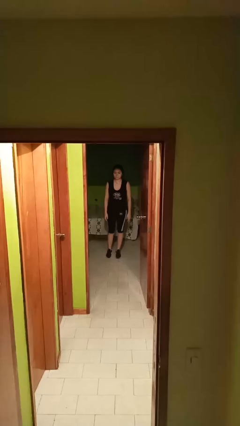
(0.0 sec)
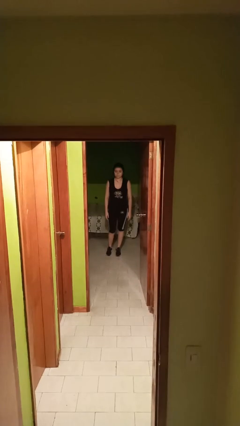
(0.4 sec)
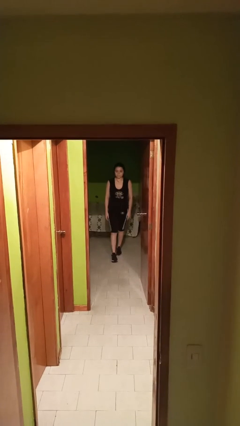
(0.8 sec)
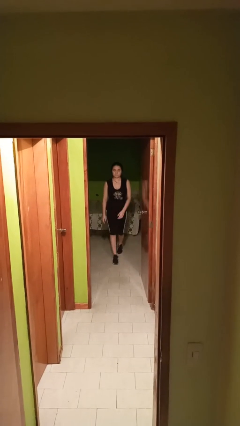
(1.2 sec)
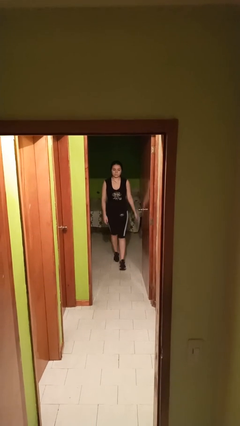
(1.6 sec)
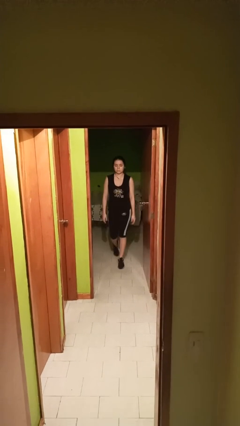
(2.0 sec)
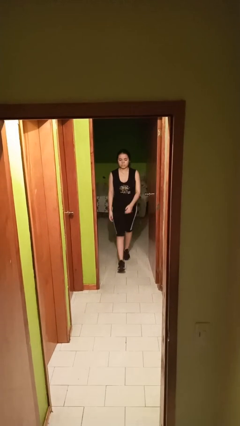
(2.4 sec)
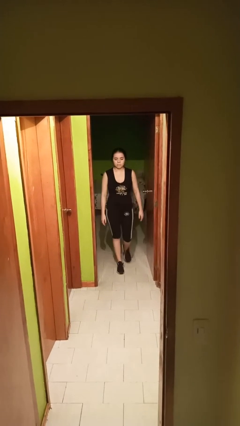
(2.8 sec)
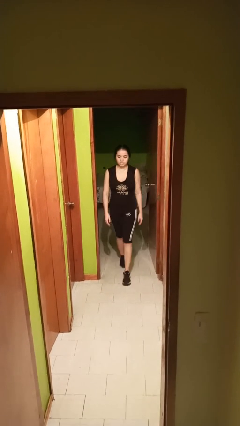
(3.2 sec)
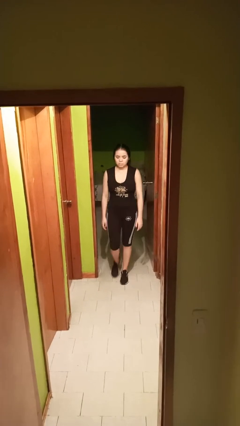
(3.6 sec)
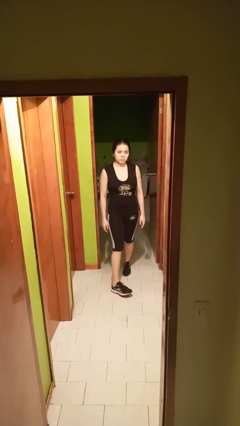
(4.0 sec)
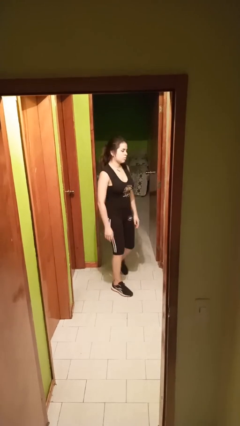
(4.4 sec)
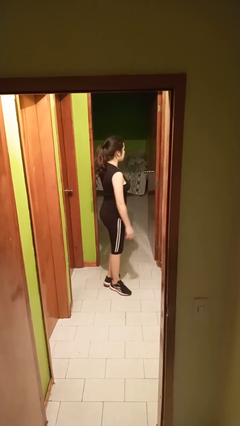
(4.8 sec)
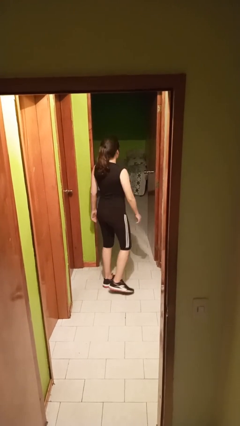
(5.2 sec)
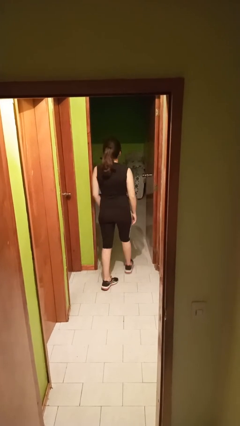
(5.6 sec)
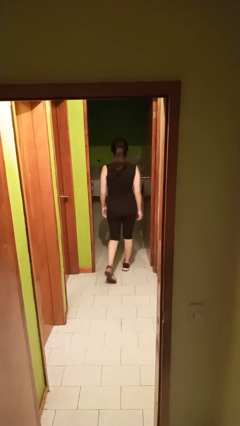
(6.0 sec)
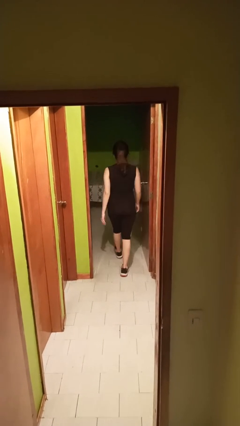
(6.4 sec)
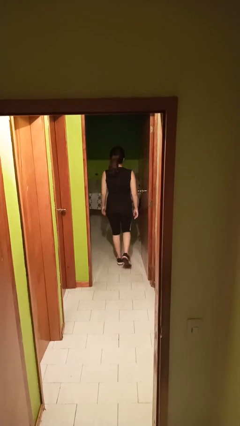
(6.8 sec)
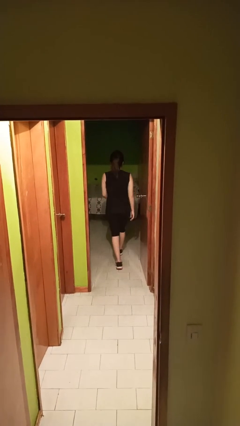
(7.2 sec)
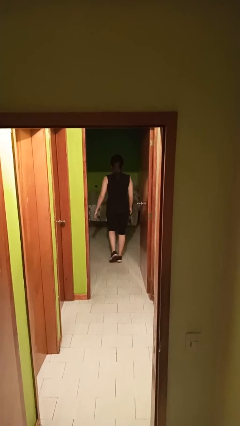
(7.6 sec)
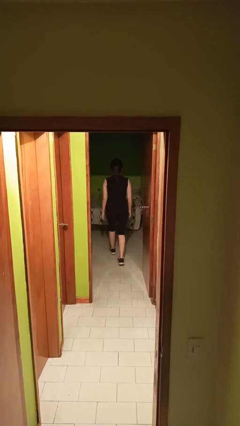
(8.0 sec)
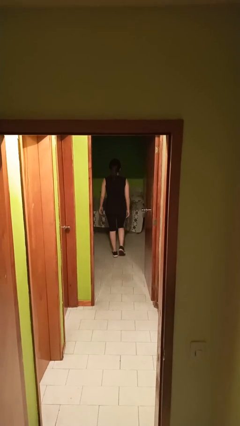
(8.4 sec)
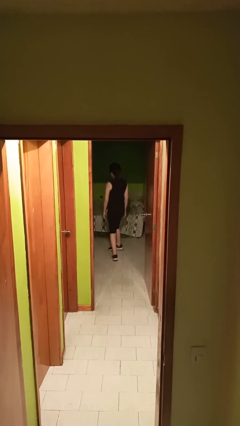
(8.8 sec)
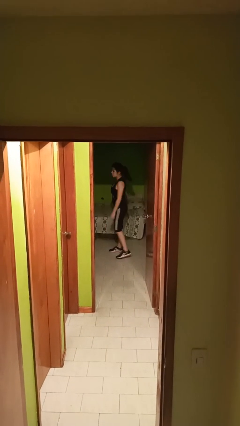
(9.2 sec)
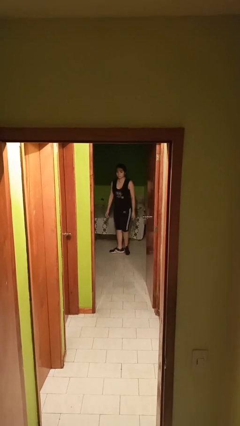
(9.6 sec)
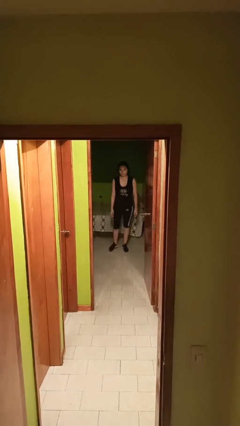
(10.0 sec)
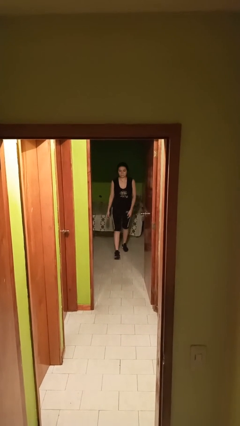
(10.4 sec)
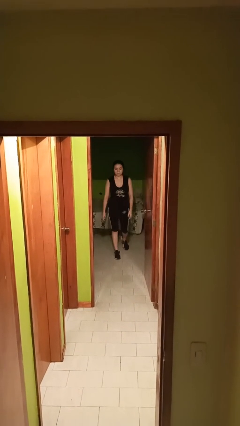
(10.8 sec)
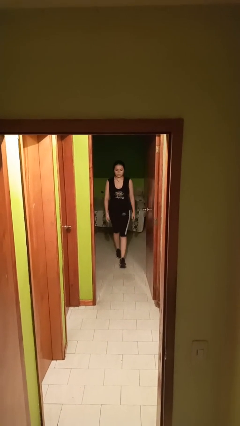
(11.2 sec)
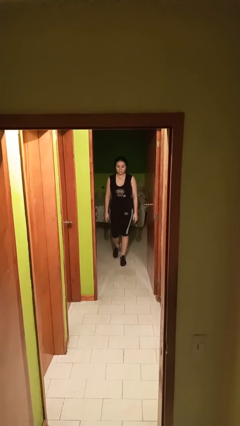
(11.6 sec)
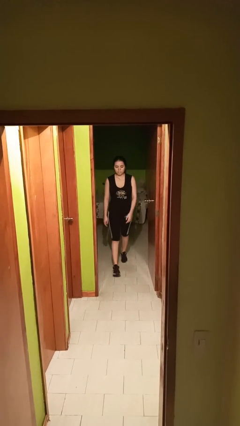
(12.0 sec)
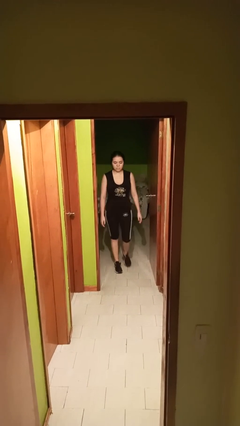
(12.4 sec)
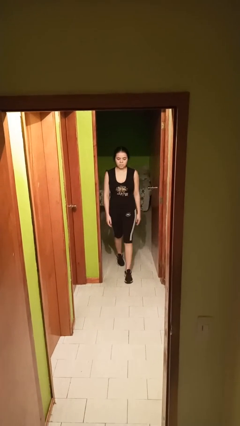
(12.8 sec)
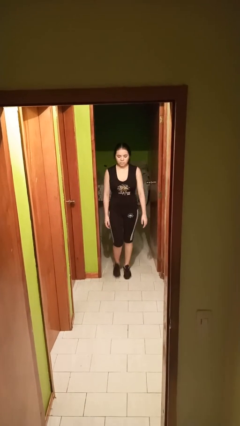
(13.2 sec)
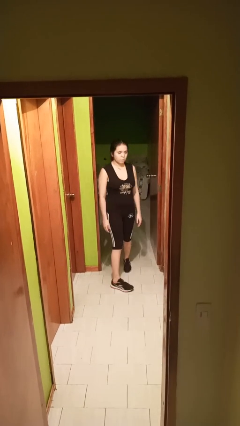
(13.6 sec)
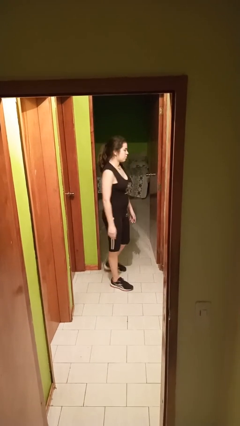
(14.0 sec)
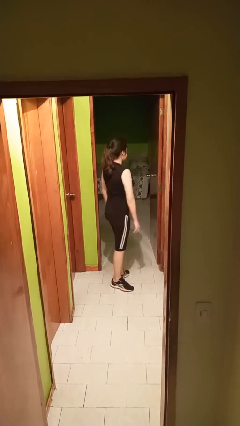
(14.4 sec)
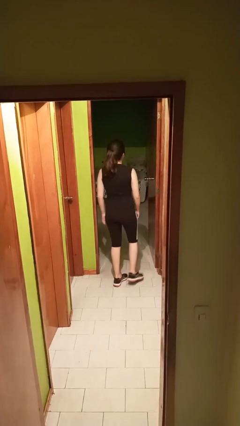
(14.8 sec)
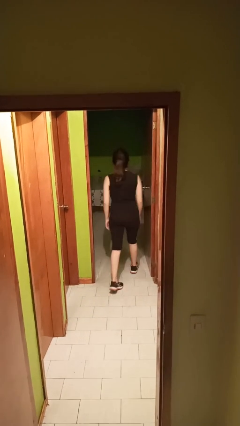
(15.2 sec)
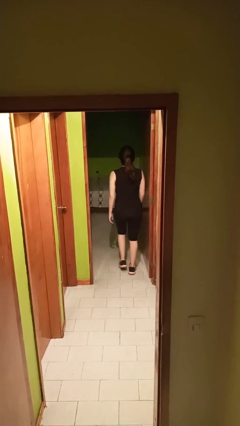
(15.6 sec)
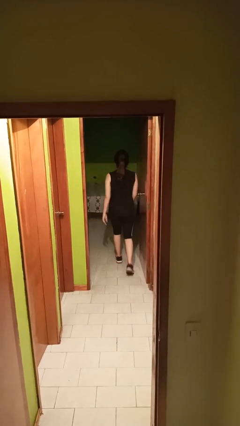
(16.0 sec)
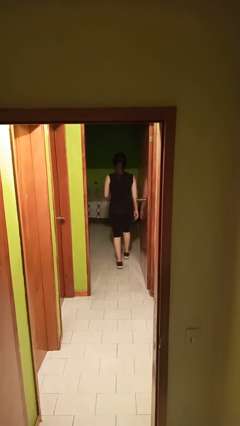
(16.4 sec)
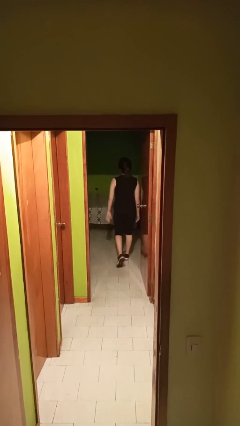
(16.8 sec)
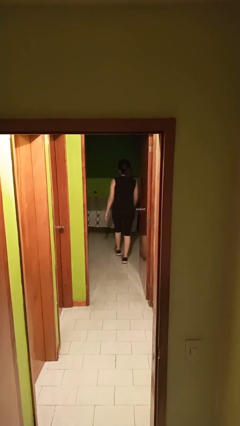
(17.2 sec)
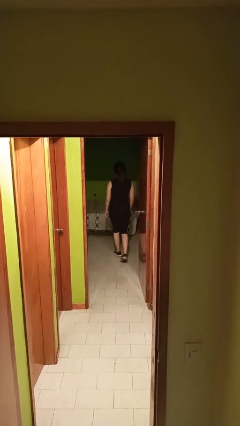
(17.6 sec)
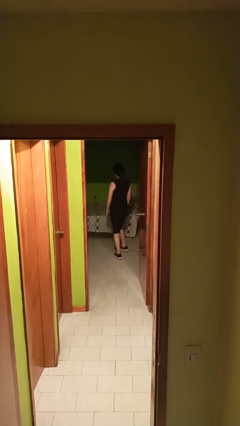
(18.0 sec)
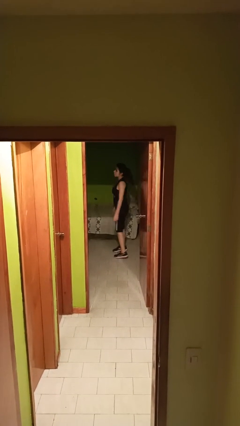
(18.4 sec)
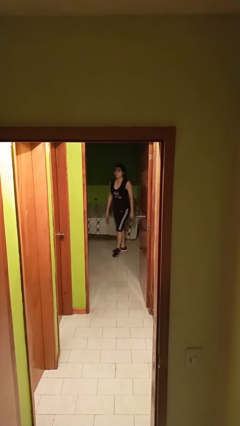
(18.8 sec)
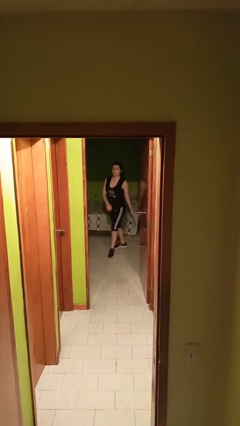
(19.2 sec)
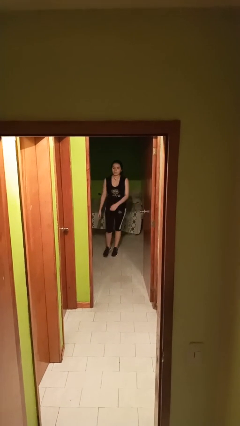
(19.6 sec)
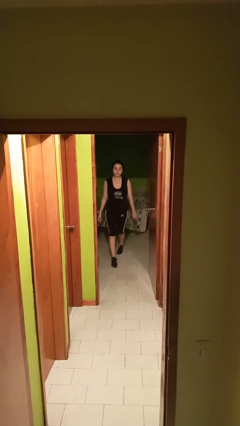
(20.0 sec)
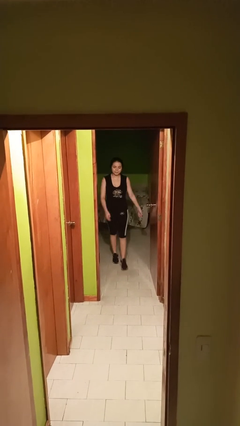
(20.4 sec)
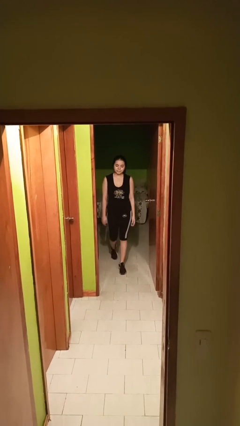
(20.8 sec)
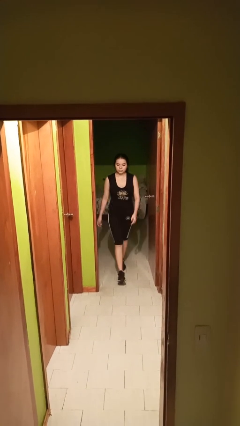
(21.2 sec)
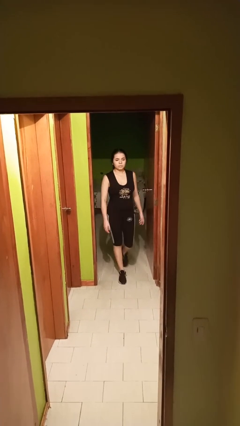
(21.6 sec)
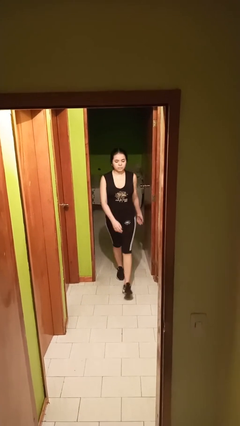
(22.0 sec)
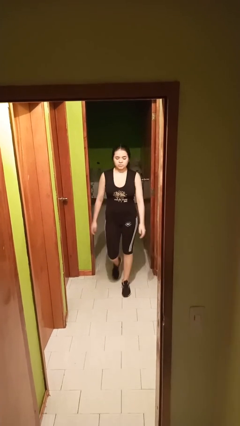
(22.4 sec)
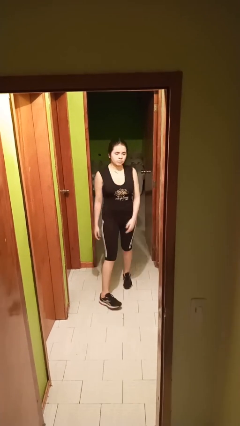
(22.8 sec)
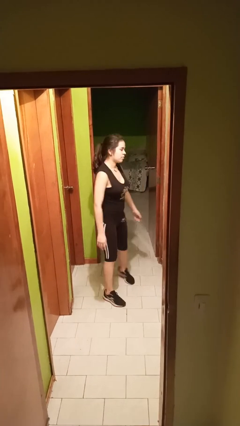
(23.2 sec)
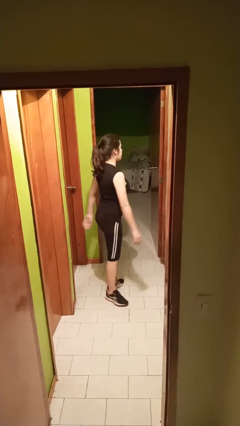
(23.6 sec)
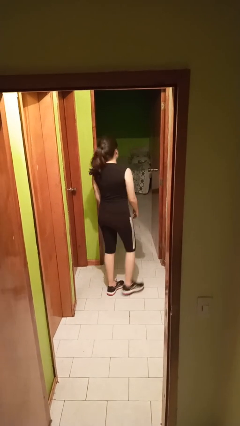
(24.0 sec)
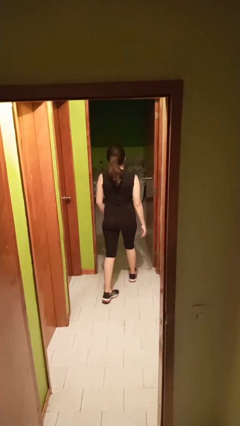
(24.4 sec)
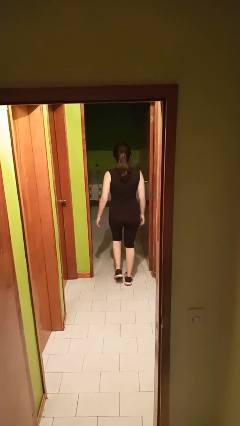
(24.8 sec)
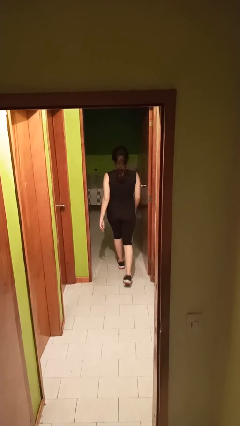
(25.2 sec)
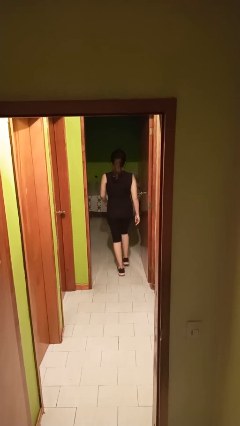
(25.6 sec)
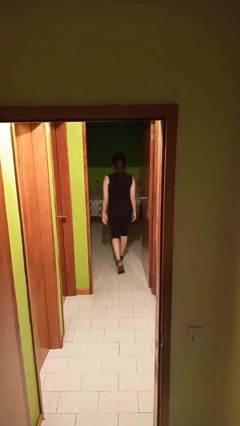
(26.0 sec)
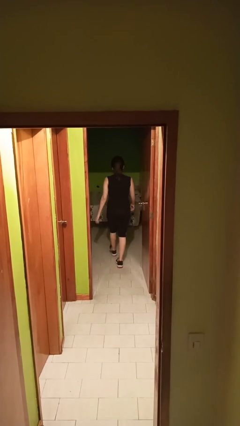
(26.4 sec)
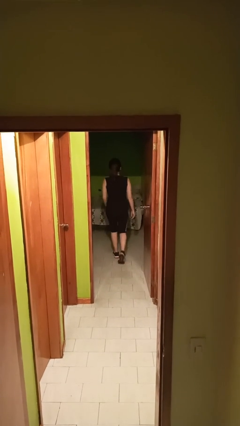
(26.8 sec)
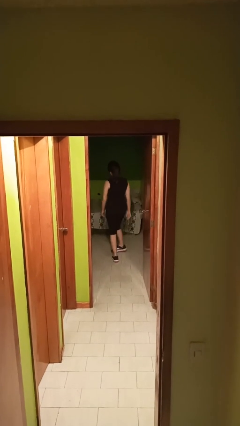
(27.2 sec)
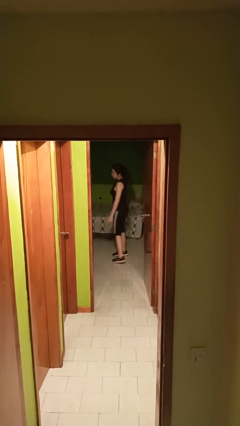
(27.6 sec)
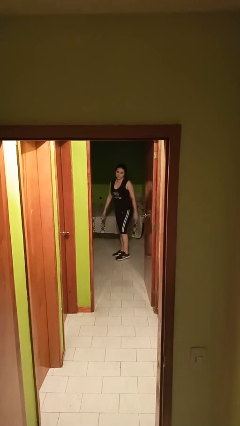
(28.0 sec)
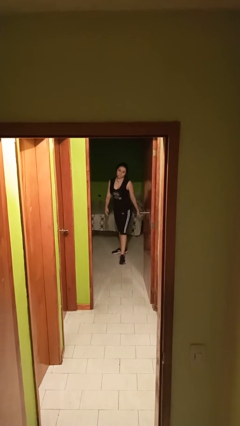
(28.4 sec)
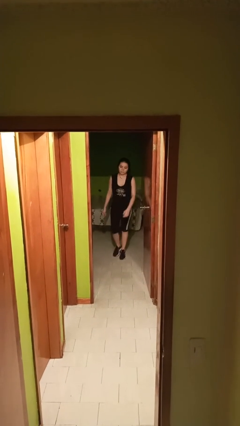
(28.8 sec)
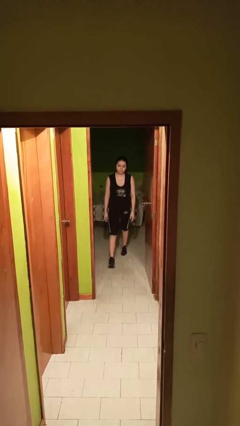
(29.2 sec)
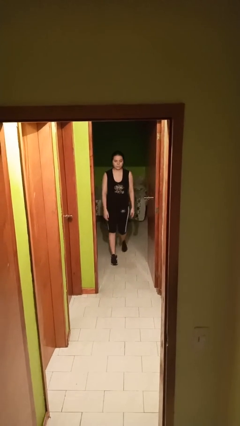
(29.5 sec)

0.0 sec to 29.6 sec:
person walks

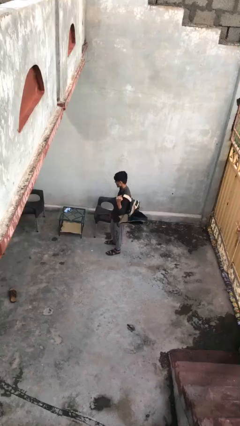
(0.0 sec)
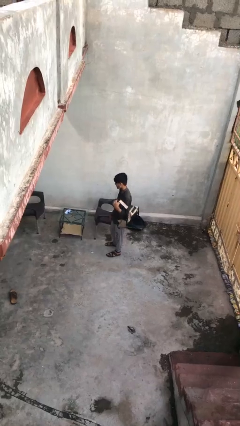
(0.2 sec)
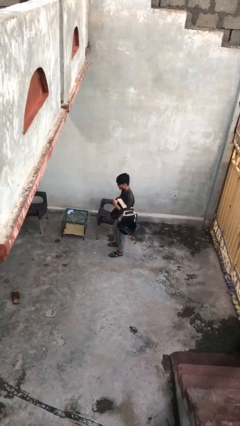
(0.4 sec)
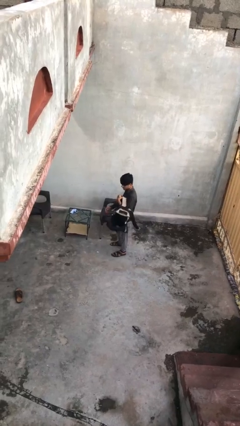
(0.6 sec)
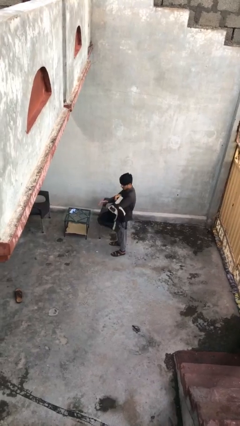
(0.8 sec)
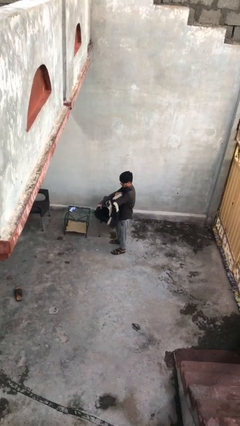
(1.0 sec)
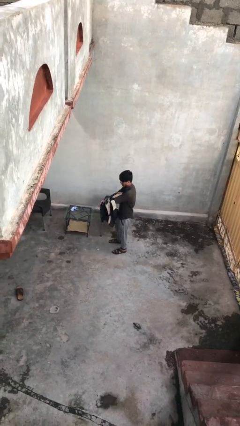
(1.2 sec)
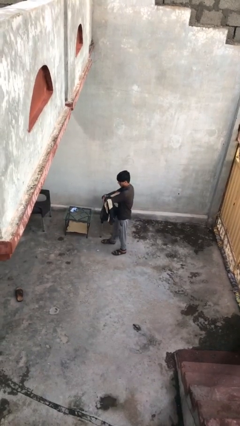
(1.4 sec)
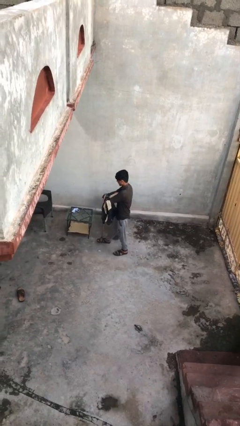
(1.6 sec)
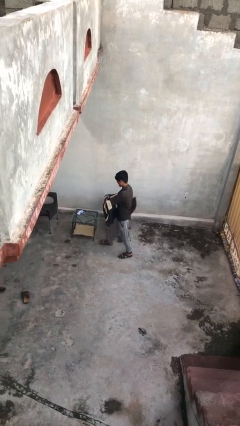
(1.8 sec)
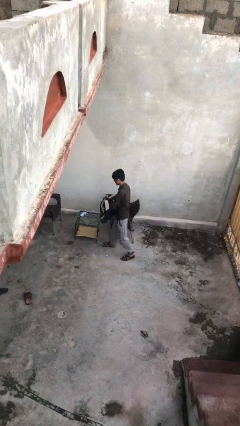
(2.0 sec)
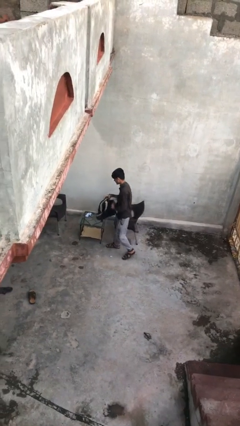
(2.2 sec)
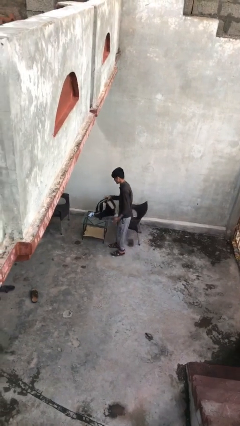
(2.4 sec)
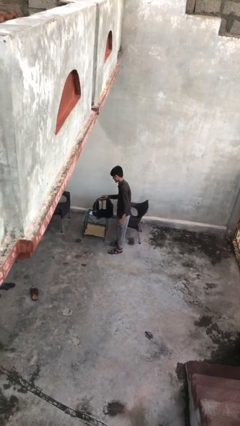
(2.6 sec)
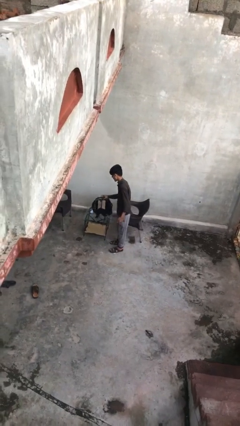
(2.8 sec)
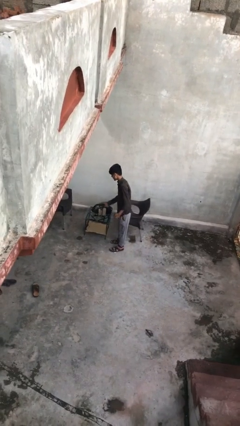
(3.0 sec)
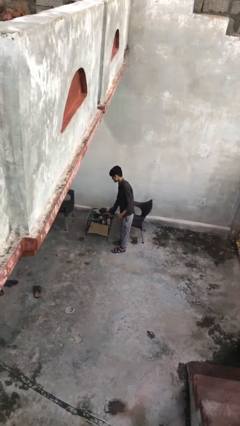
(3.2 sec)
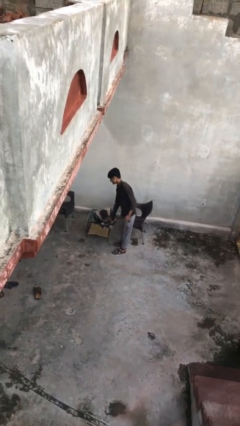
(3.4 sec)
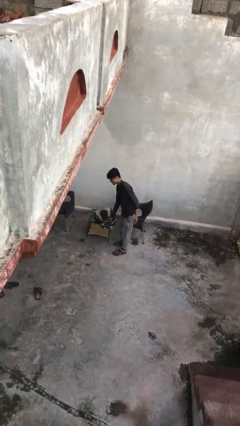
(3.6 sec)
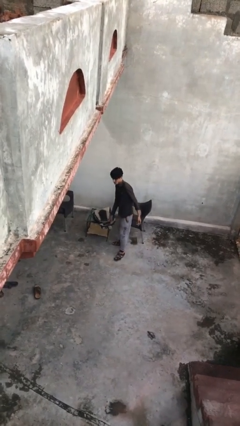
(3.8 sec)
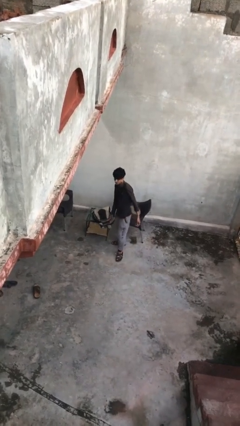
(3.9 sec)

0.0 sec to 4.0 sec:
person puts down object on table
